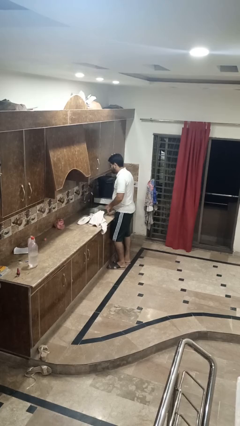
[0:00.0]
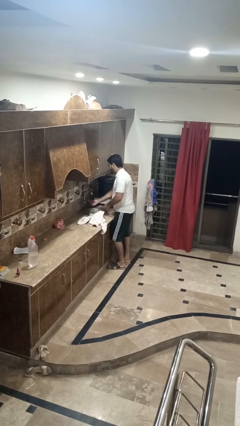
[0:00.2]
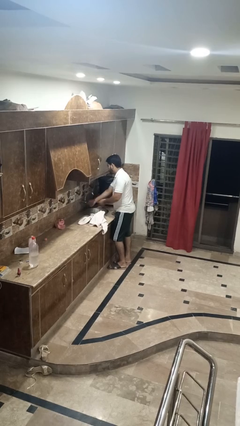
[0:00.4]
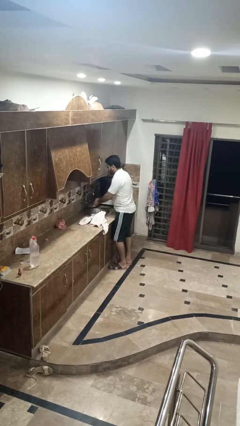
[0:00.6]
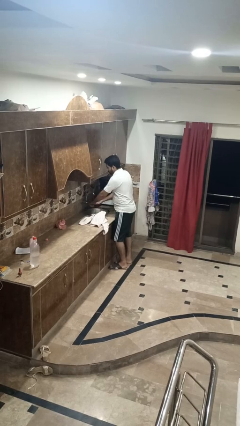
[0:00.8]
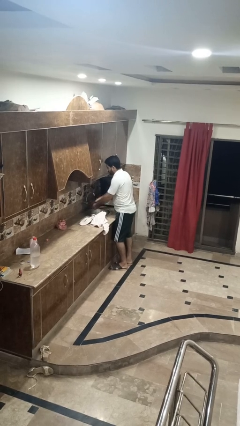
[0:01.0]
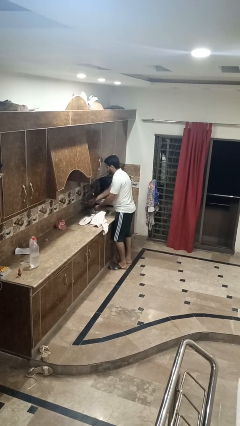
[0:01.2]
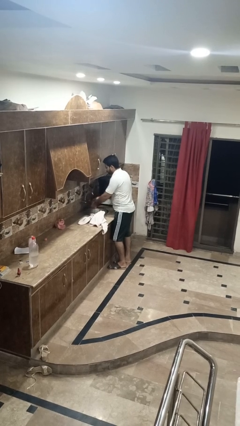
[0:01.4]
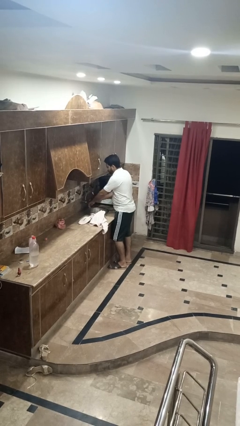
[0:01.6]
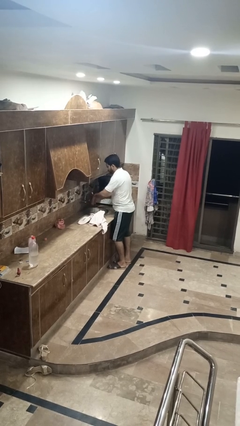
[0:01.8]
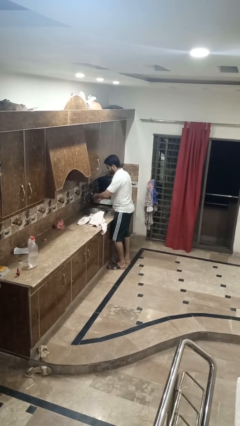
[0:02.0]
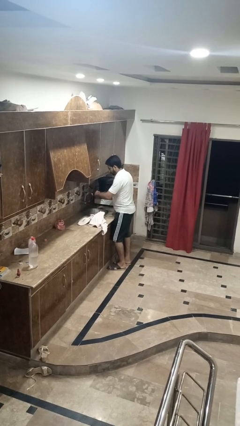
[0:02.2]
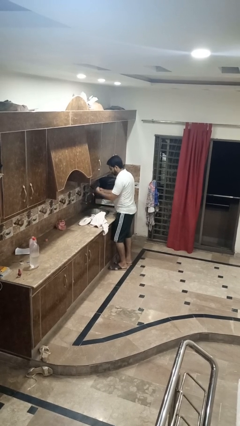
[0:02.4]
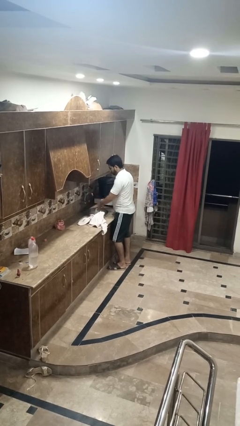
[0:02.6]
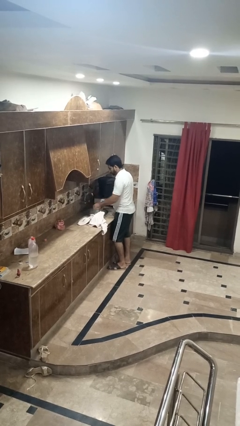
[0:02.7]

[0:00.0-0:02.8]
person washes hands

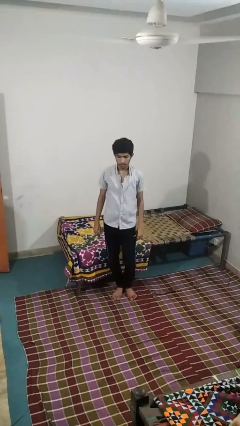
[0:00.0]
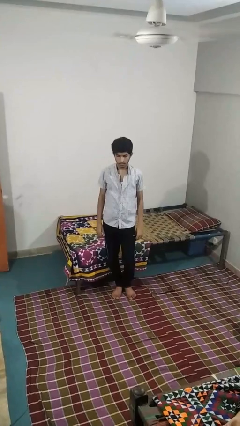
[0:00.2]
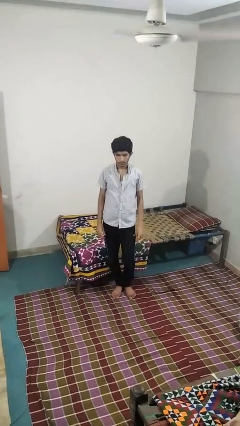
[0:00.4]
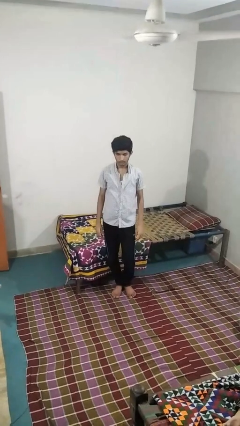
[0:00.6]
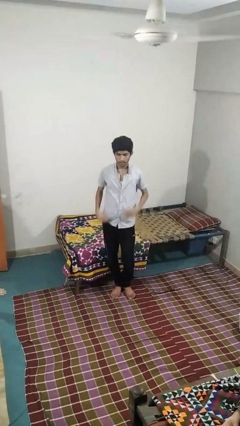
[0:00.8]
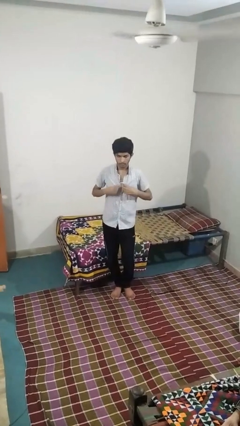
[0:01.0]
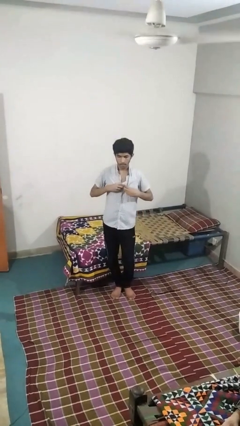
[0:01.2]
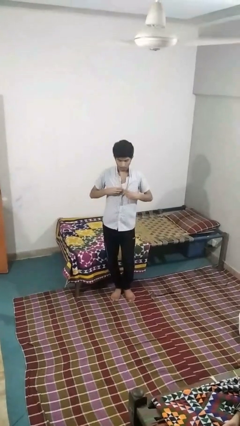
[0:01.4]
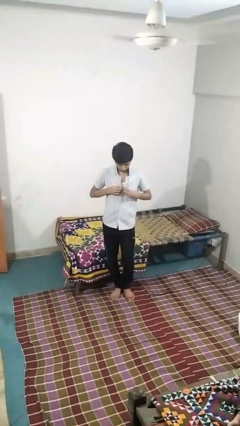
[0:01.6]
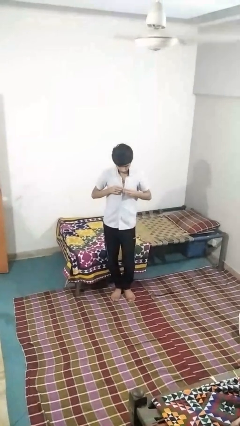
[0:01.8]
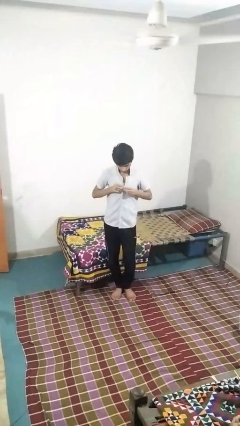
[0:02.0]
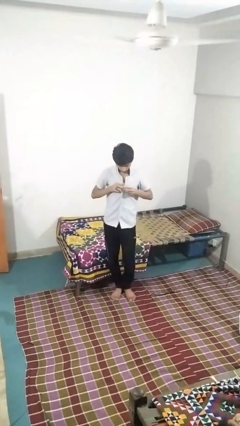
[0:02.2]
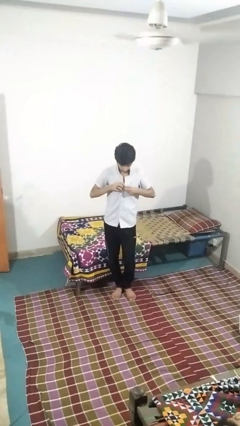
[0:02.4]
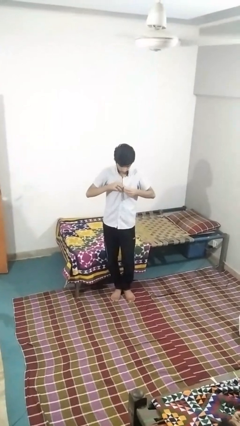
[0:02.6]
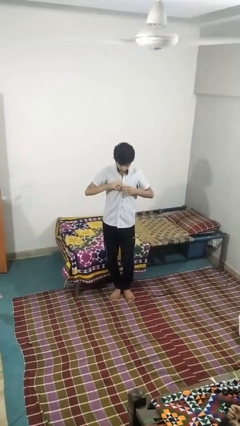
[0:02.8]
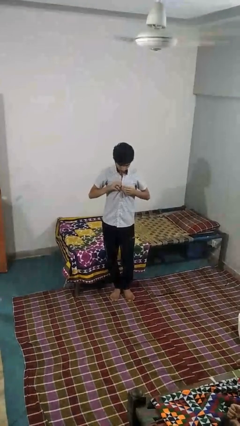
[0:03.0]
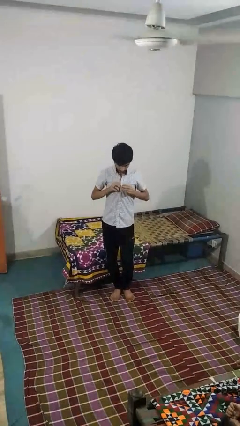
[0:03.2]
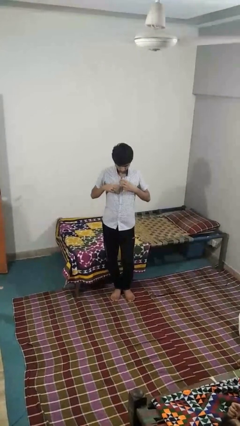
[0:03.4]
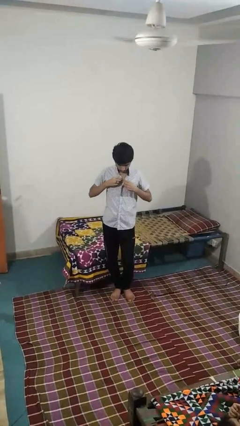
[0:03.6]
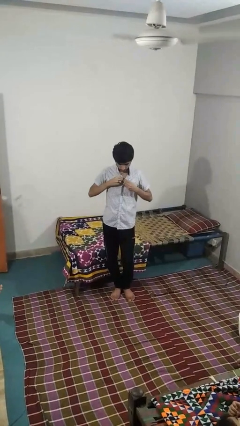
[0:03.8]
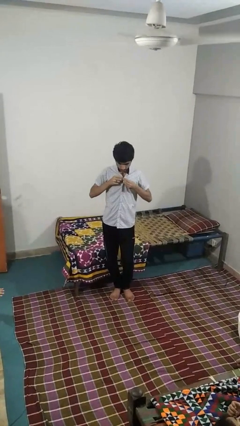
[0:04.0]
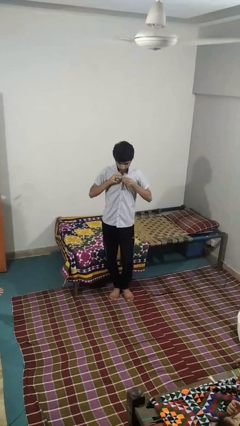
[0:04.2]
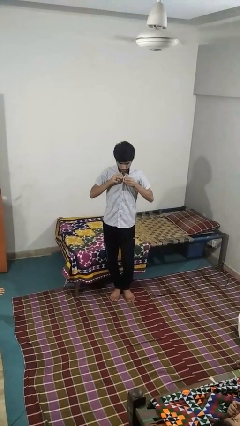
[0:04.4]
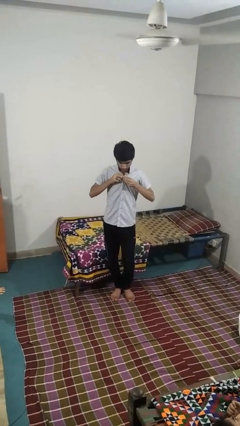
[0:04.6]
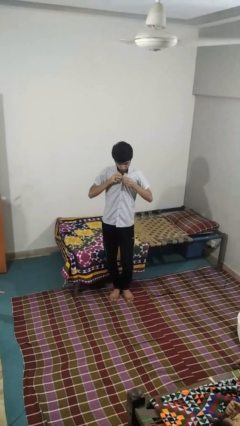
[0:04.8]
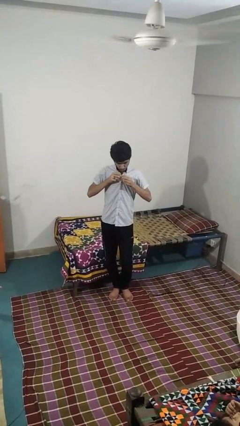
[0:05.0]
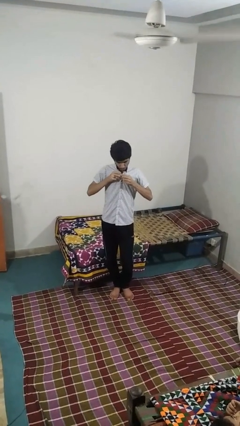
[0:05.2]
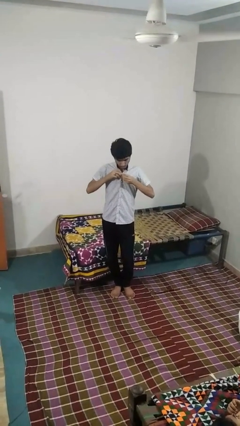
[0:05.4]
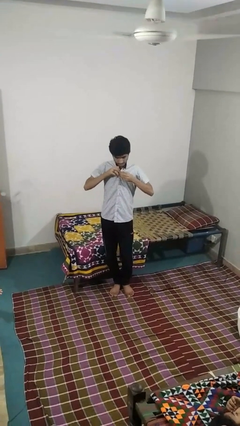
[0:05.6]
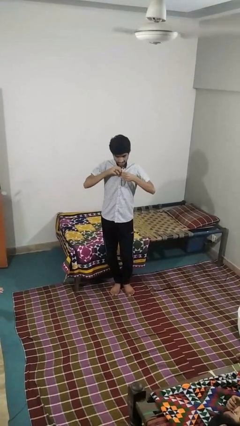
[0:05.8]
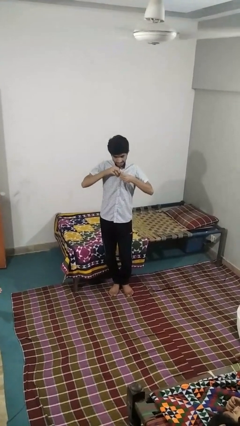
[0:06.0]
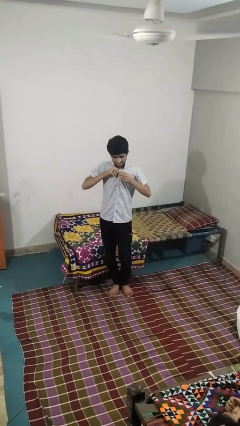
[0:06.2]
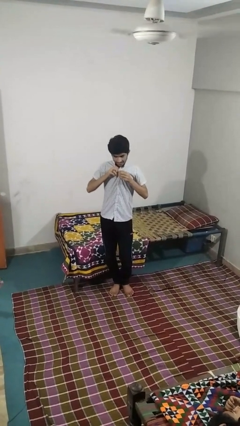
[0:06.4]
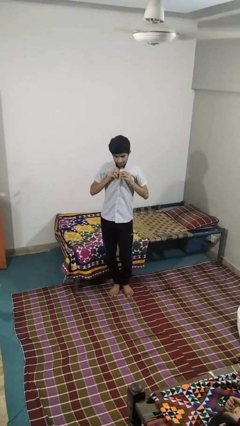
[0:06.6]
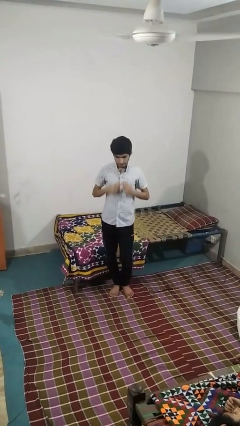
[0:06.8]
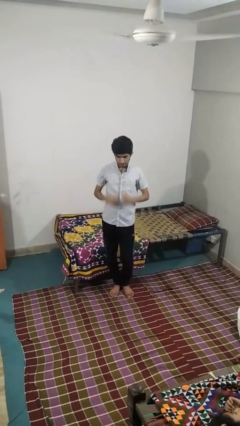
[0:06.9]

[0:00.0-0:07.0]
person buttons shirt

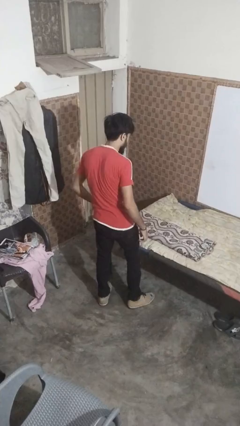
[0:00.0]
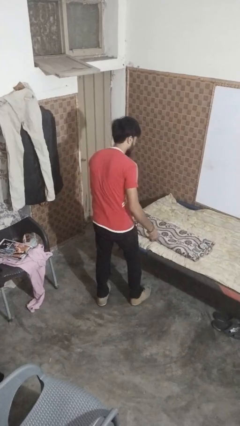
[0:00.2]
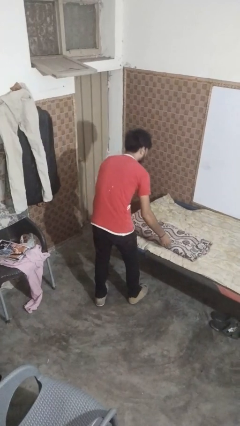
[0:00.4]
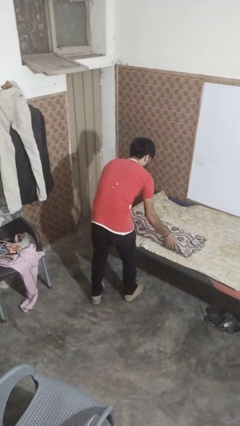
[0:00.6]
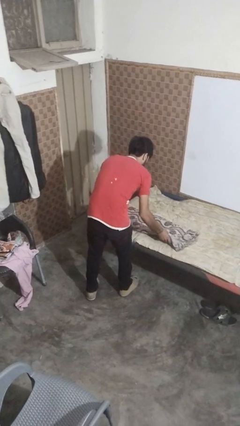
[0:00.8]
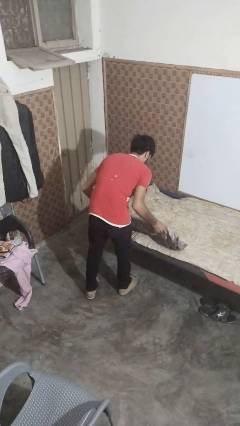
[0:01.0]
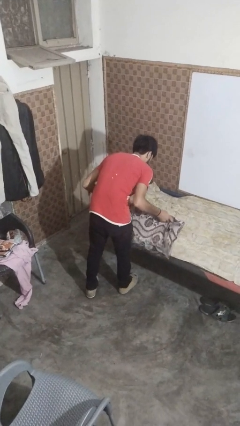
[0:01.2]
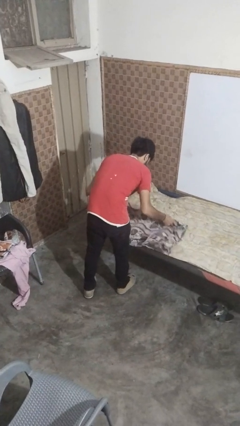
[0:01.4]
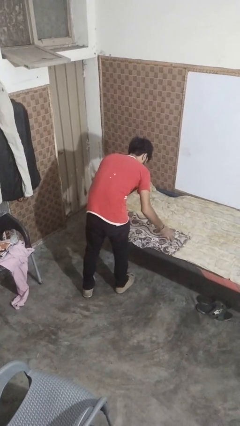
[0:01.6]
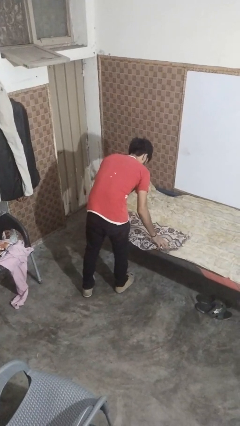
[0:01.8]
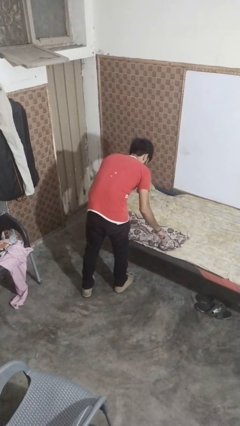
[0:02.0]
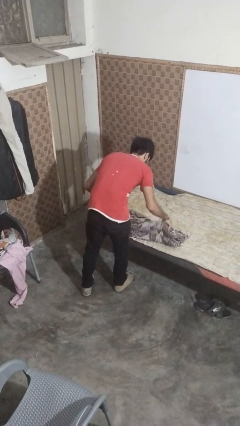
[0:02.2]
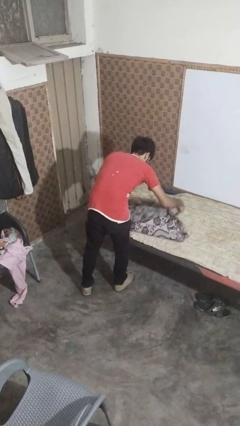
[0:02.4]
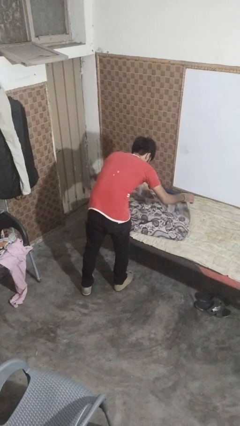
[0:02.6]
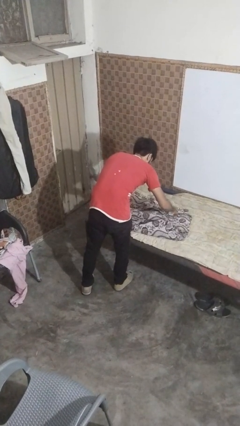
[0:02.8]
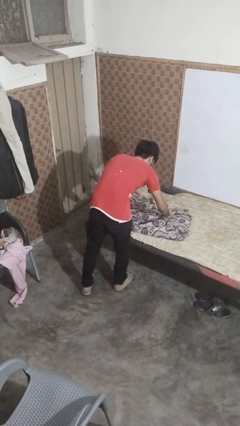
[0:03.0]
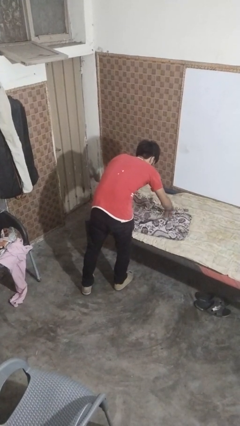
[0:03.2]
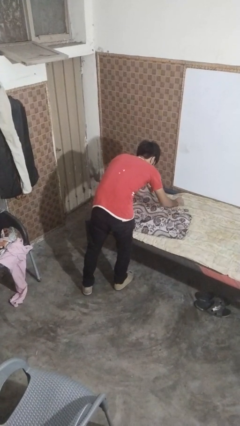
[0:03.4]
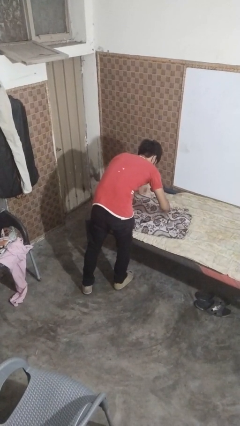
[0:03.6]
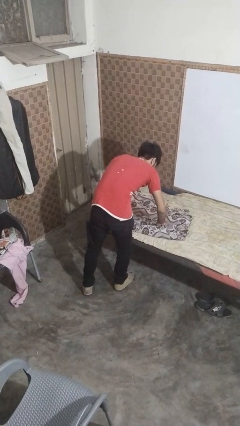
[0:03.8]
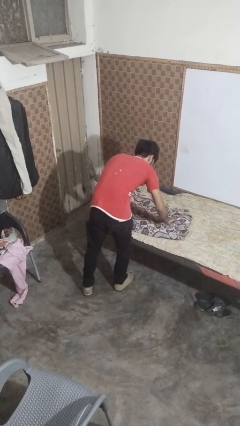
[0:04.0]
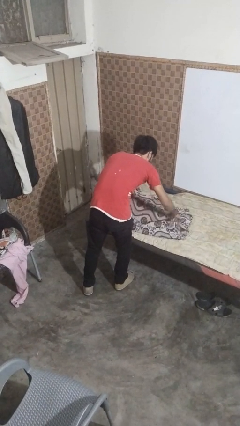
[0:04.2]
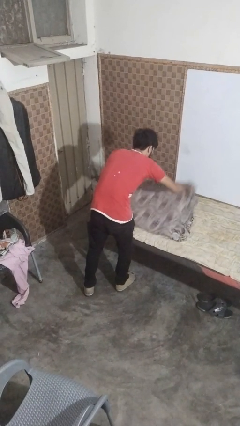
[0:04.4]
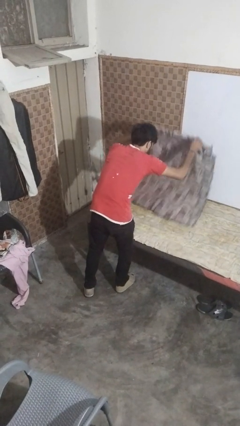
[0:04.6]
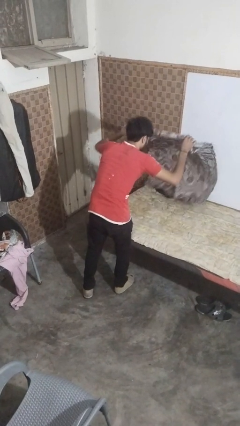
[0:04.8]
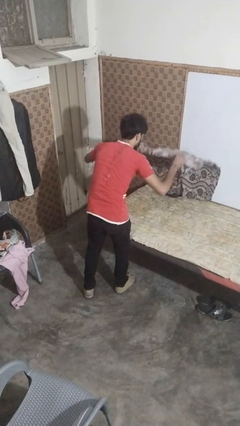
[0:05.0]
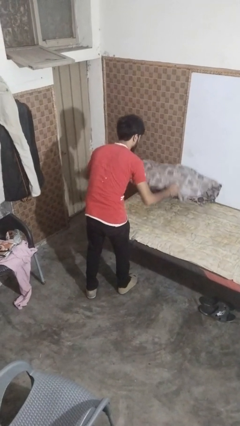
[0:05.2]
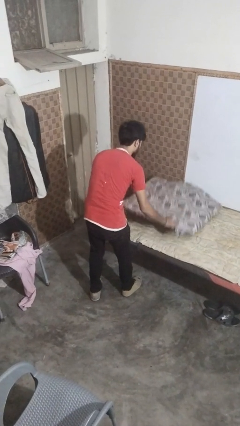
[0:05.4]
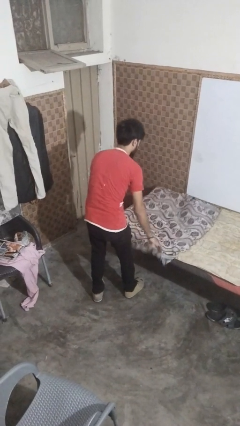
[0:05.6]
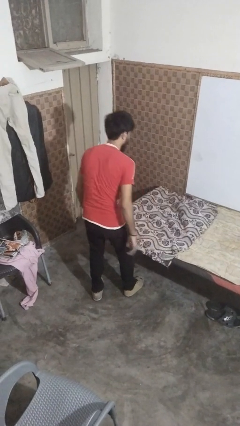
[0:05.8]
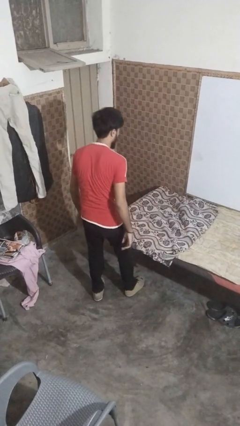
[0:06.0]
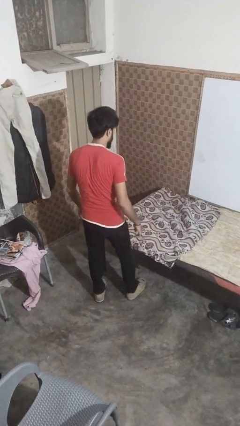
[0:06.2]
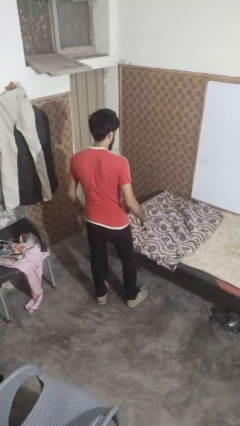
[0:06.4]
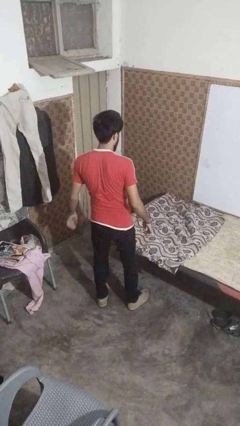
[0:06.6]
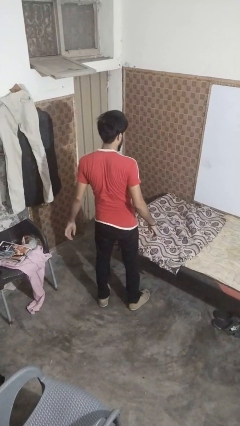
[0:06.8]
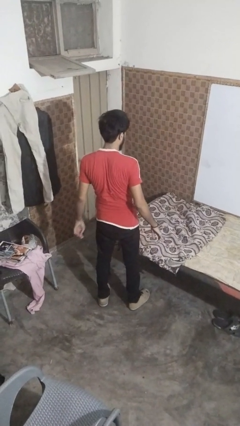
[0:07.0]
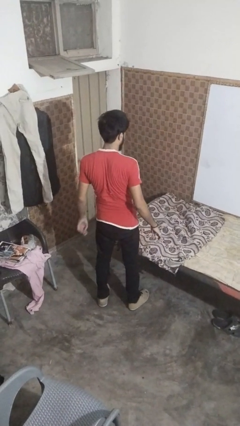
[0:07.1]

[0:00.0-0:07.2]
person unfolds blanket

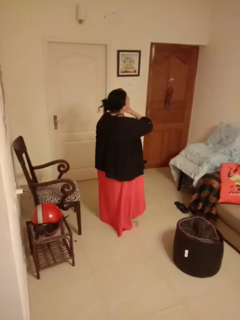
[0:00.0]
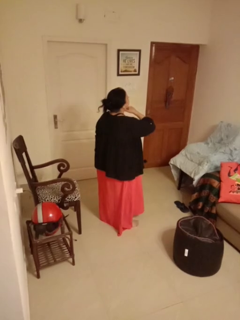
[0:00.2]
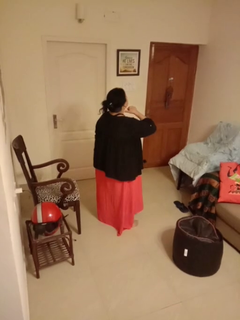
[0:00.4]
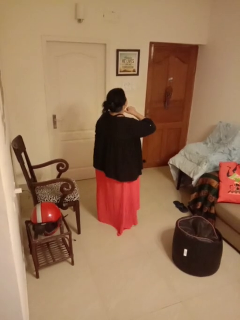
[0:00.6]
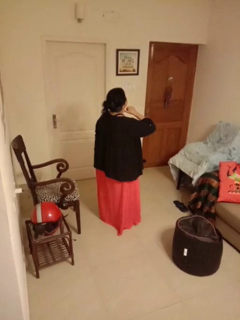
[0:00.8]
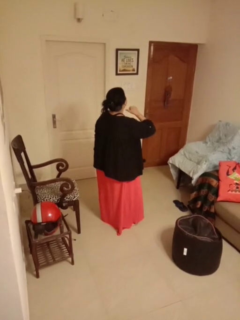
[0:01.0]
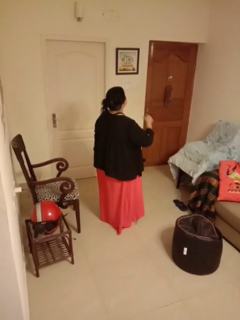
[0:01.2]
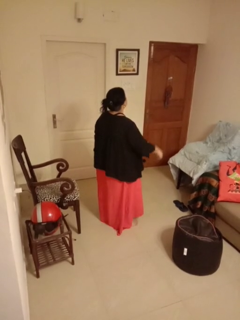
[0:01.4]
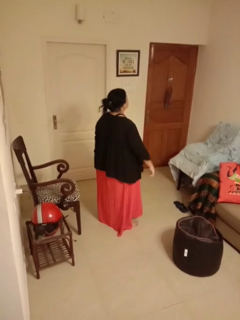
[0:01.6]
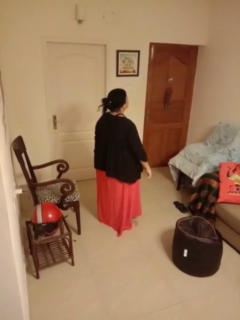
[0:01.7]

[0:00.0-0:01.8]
person gestures cut
